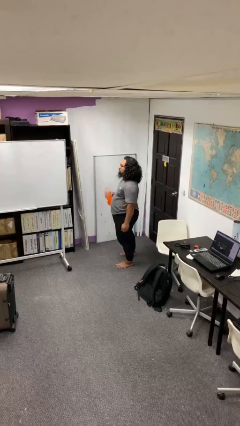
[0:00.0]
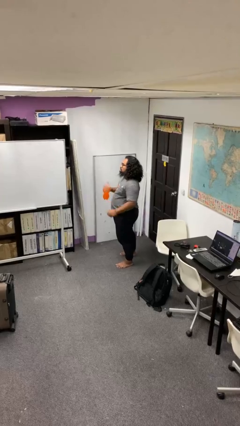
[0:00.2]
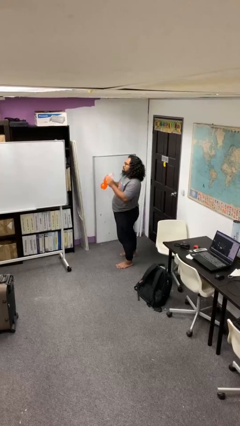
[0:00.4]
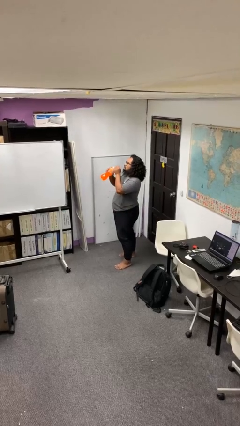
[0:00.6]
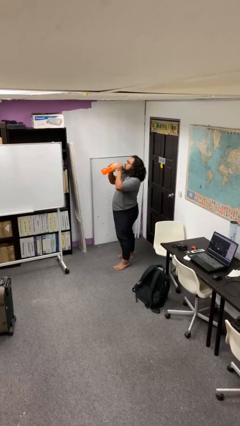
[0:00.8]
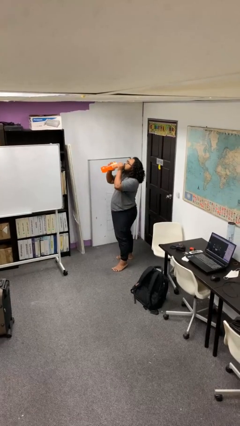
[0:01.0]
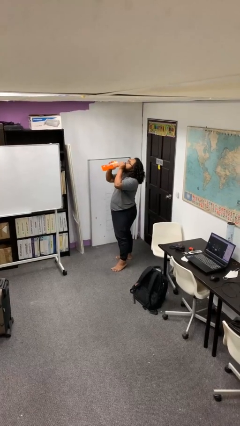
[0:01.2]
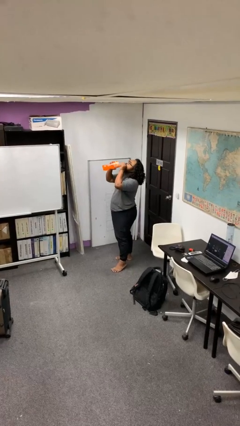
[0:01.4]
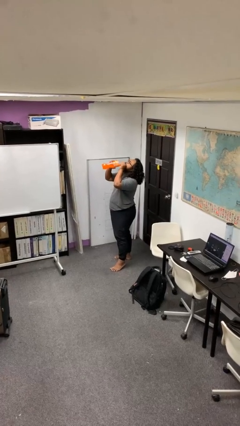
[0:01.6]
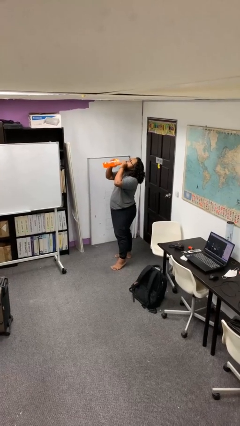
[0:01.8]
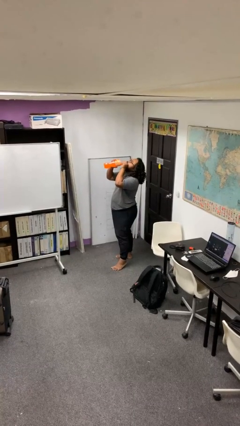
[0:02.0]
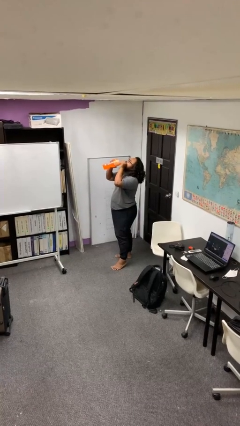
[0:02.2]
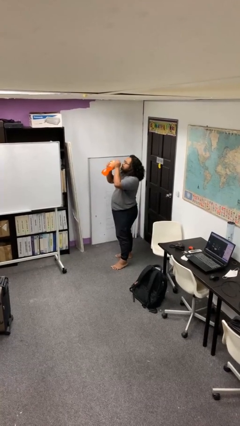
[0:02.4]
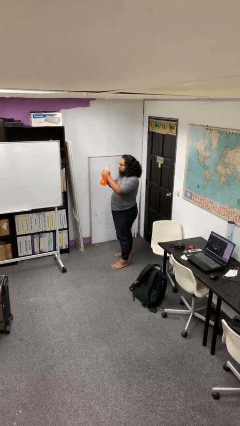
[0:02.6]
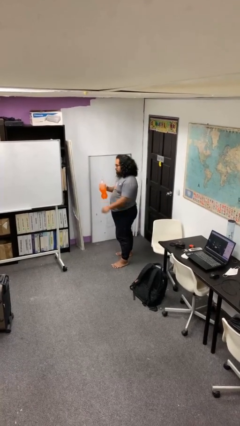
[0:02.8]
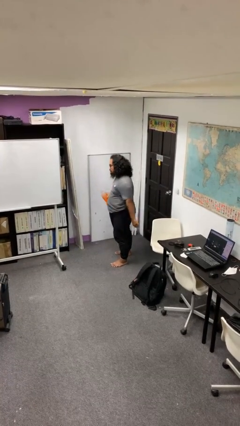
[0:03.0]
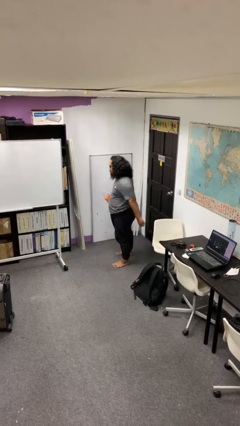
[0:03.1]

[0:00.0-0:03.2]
person drinks from bottle

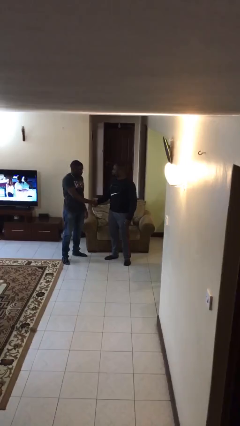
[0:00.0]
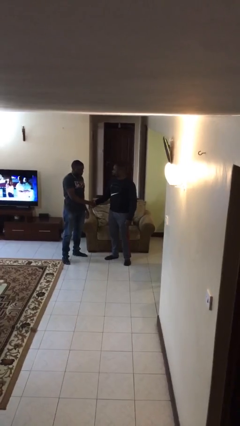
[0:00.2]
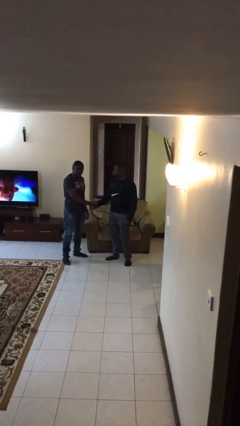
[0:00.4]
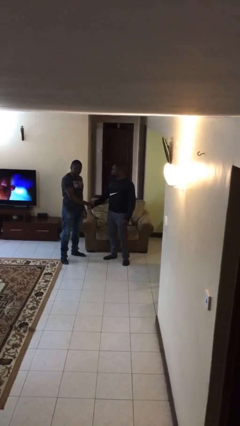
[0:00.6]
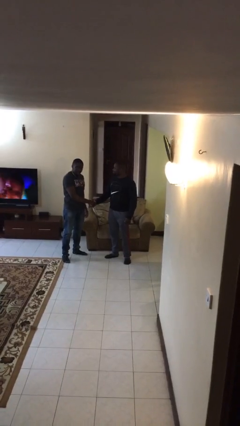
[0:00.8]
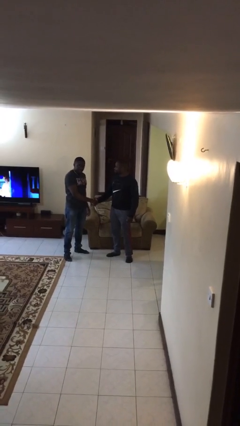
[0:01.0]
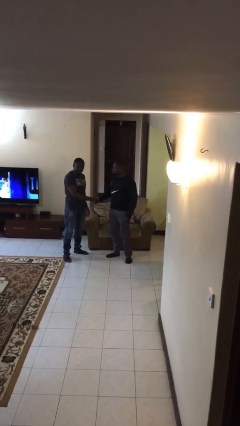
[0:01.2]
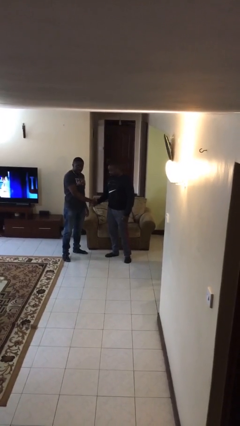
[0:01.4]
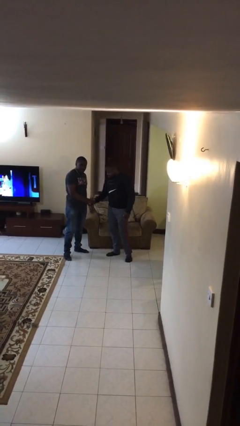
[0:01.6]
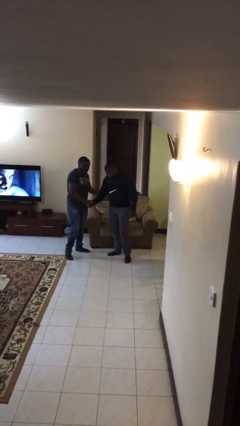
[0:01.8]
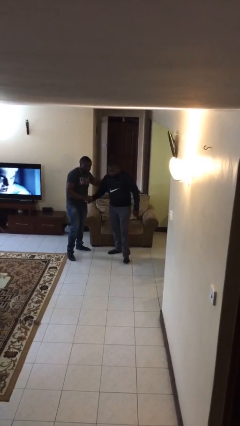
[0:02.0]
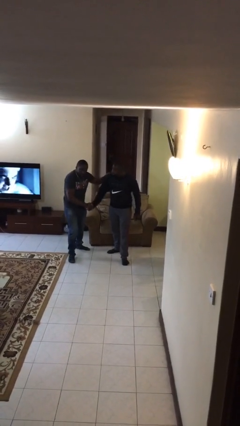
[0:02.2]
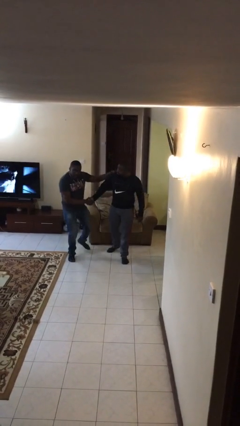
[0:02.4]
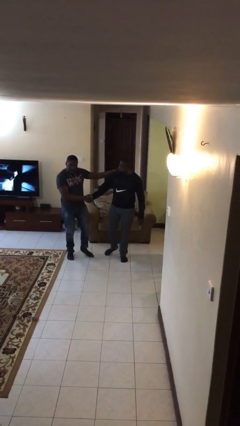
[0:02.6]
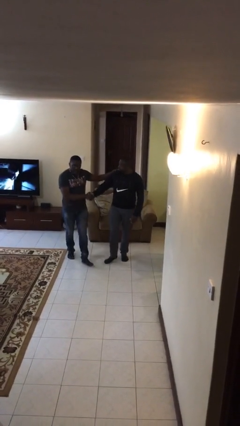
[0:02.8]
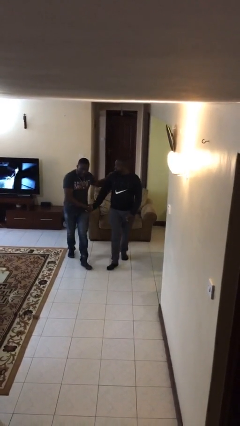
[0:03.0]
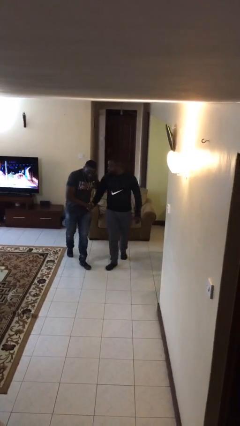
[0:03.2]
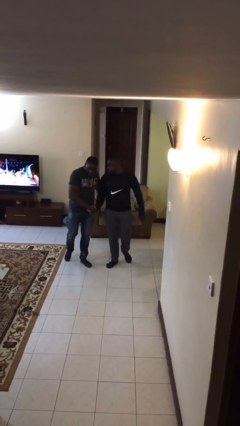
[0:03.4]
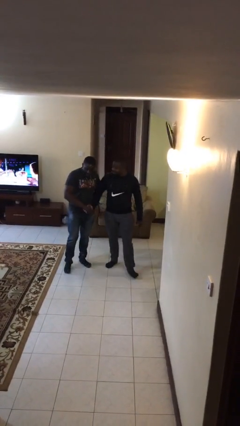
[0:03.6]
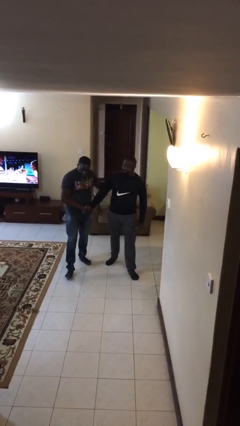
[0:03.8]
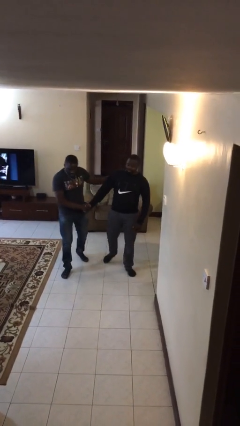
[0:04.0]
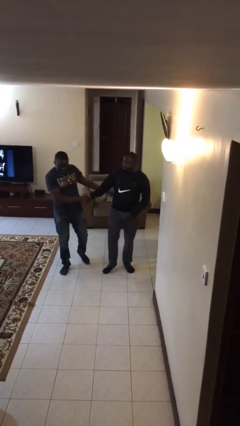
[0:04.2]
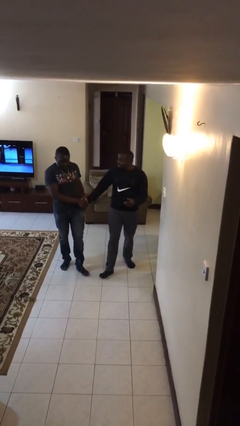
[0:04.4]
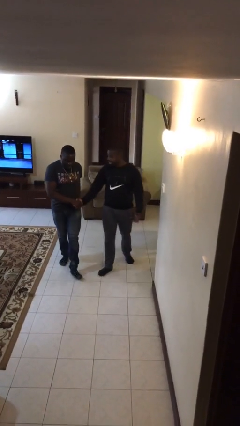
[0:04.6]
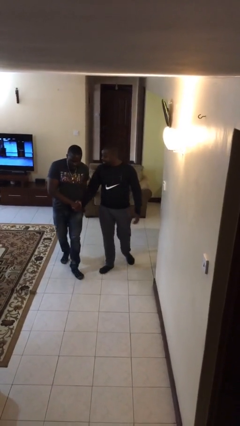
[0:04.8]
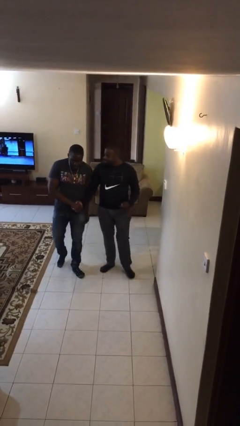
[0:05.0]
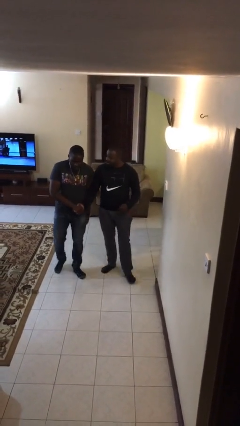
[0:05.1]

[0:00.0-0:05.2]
person holds hand

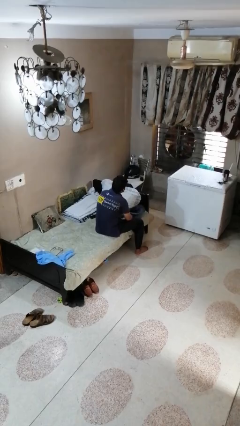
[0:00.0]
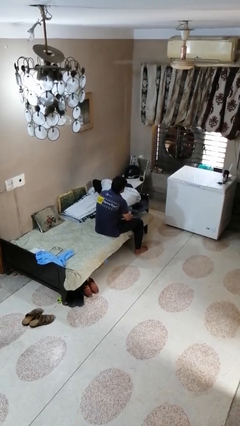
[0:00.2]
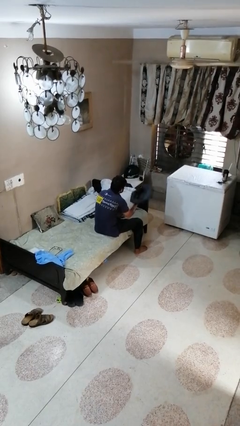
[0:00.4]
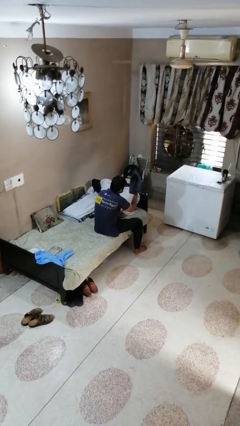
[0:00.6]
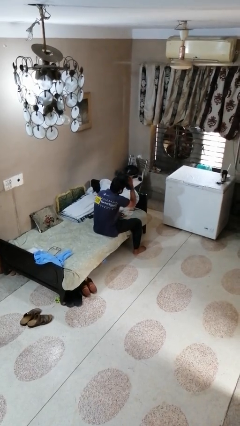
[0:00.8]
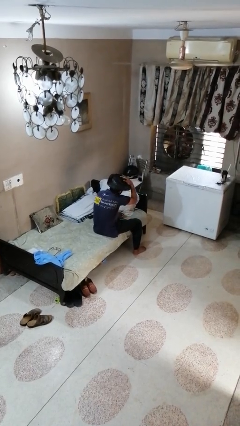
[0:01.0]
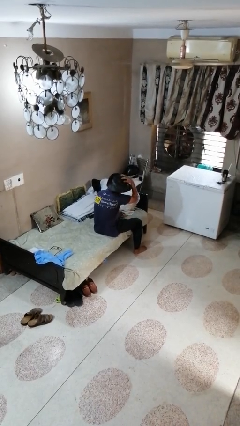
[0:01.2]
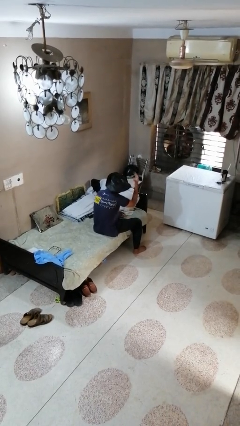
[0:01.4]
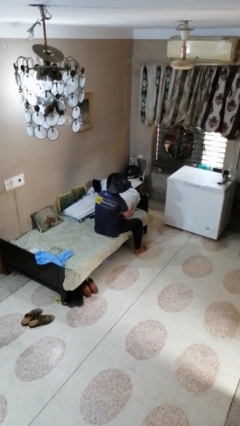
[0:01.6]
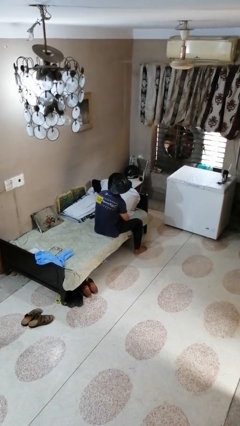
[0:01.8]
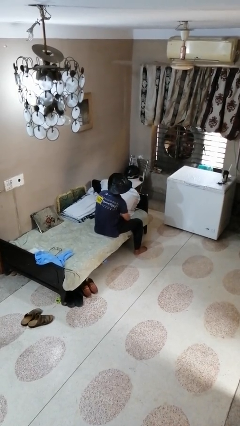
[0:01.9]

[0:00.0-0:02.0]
person puts on hat

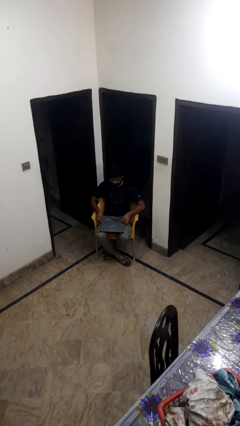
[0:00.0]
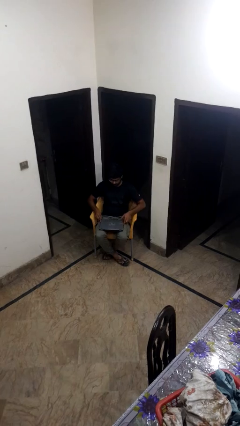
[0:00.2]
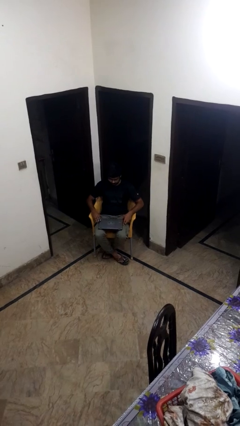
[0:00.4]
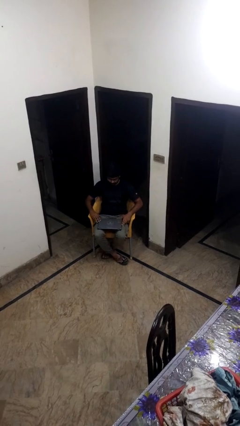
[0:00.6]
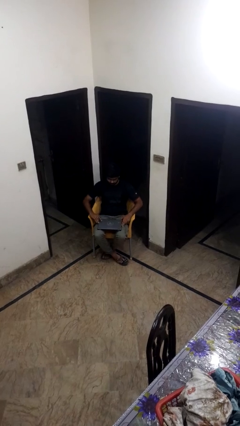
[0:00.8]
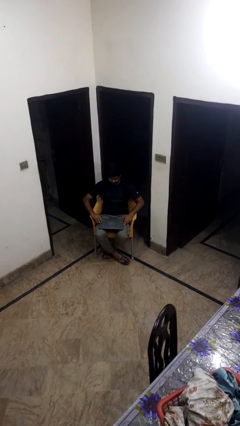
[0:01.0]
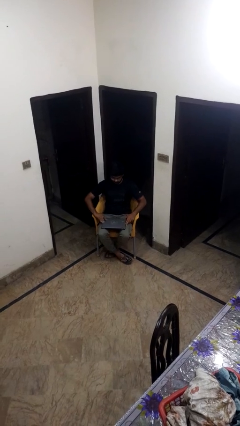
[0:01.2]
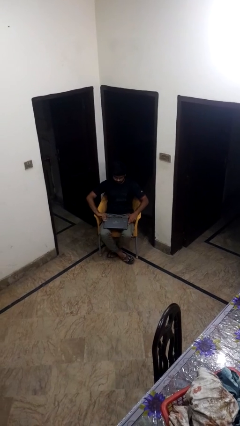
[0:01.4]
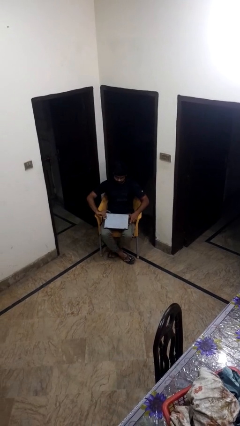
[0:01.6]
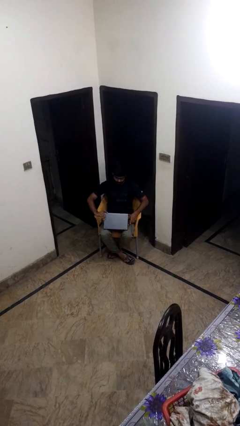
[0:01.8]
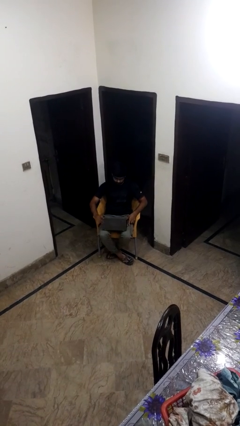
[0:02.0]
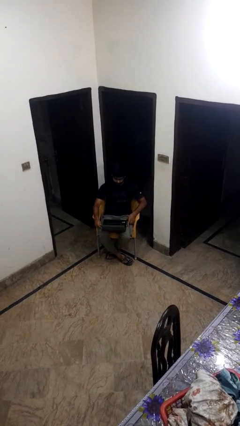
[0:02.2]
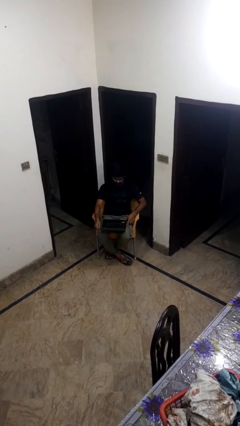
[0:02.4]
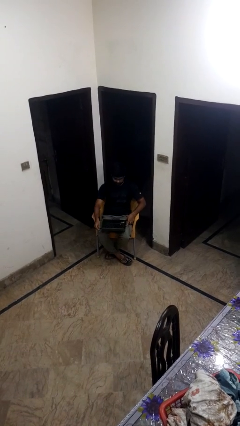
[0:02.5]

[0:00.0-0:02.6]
person opens laptop

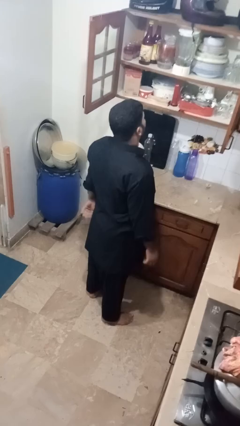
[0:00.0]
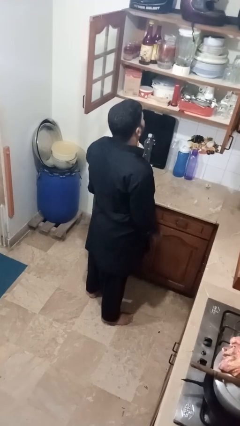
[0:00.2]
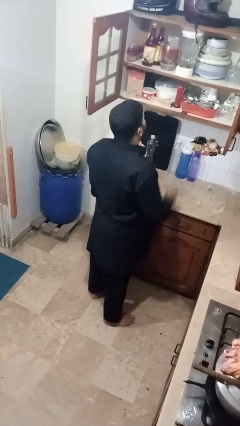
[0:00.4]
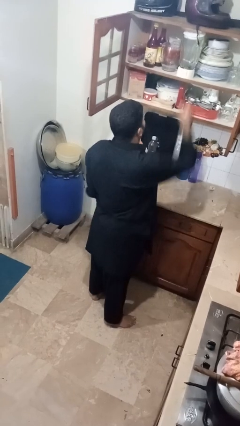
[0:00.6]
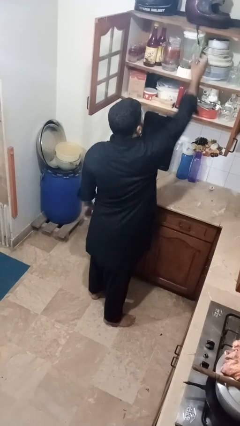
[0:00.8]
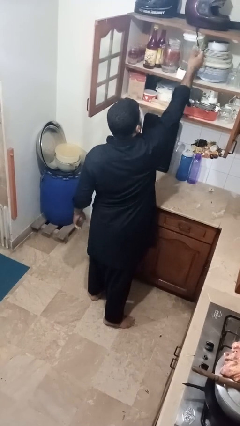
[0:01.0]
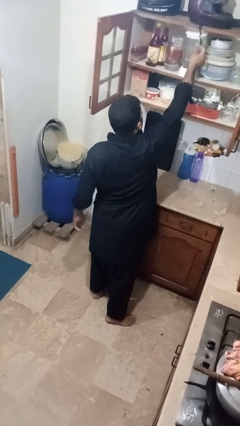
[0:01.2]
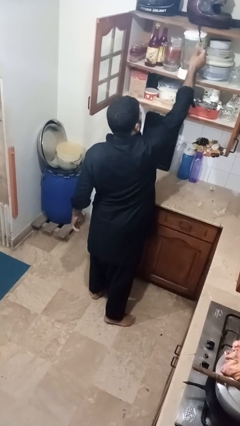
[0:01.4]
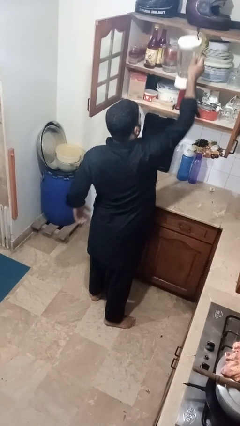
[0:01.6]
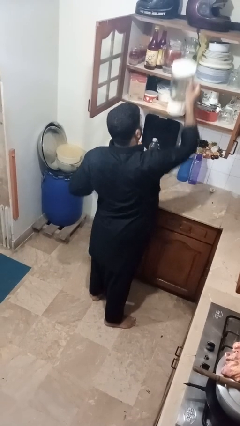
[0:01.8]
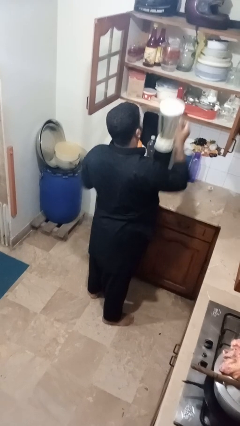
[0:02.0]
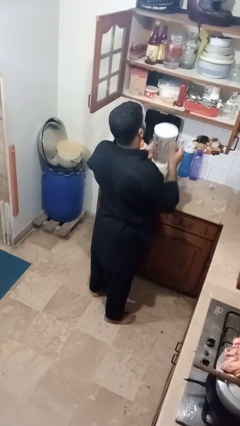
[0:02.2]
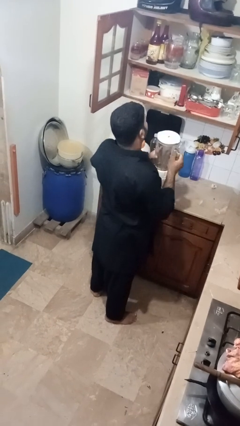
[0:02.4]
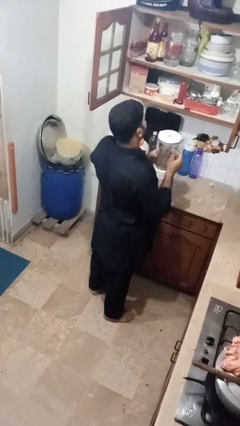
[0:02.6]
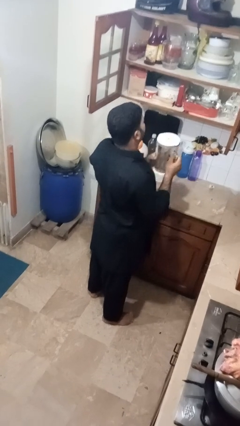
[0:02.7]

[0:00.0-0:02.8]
person picks up object from cabinet

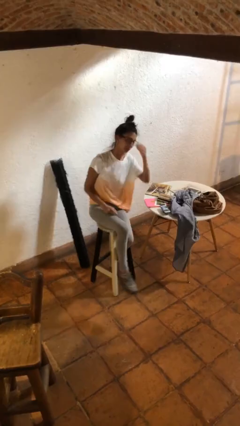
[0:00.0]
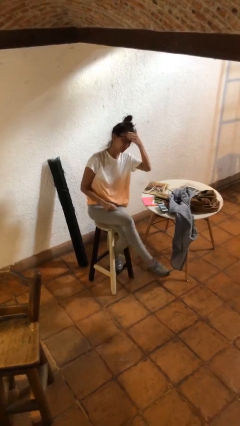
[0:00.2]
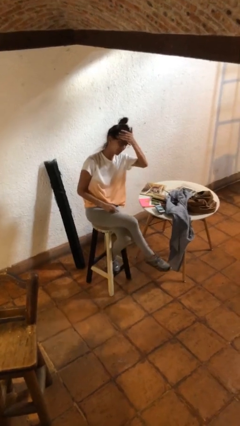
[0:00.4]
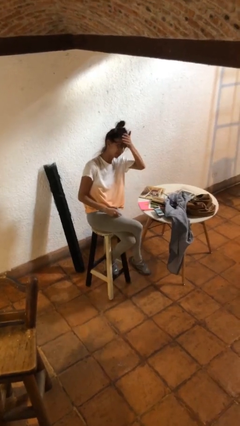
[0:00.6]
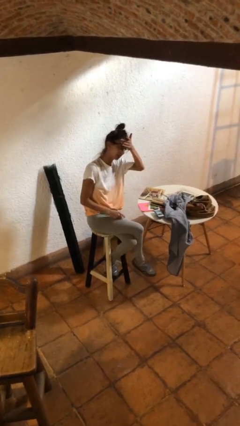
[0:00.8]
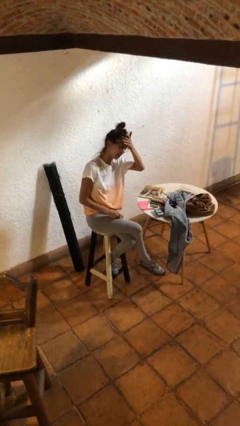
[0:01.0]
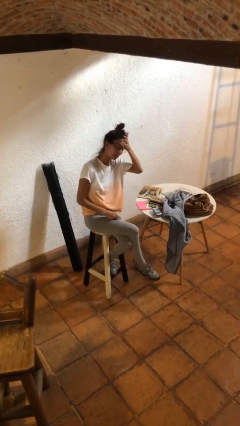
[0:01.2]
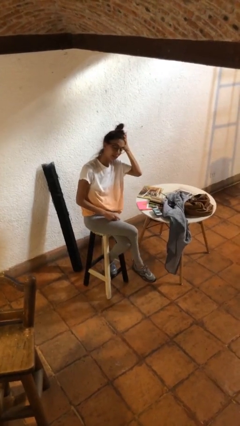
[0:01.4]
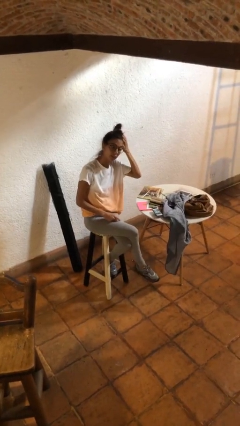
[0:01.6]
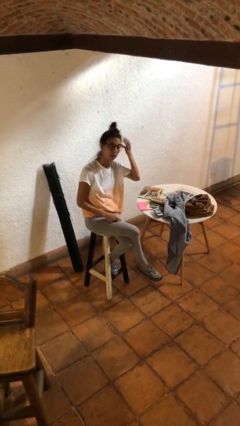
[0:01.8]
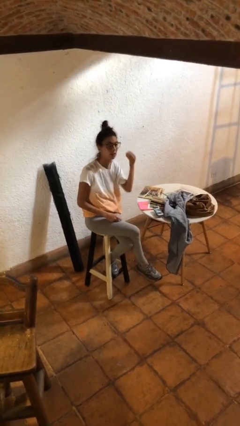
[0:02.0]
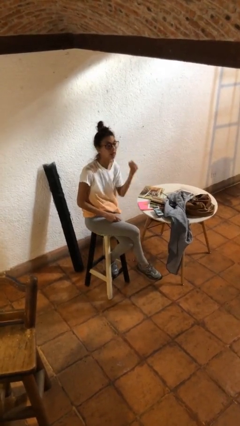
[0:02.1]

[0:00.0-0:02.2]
person scratches face
